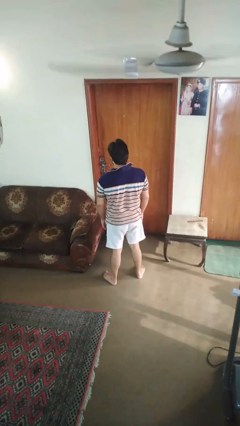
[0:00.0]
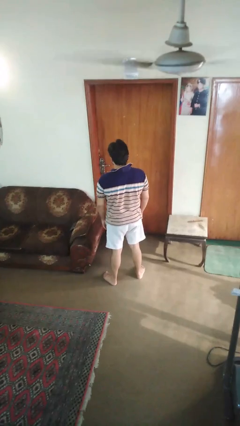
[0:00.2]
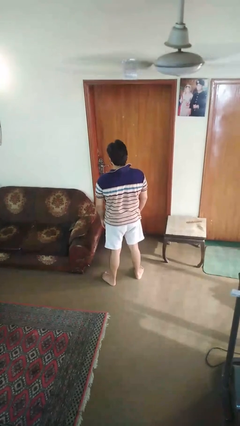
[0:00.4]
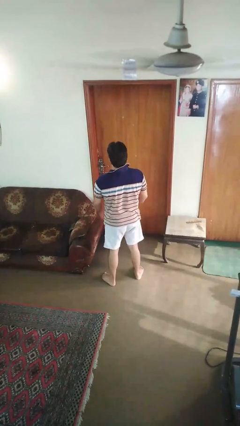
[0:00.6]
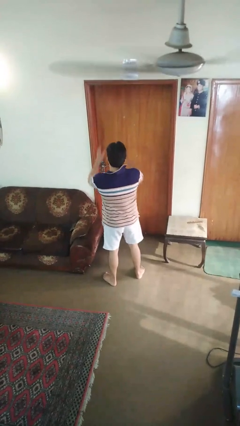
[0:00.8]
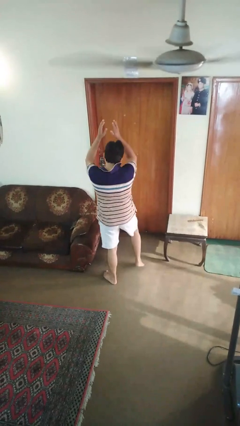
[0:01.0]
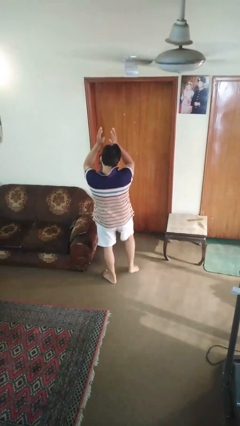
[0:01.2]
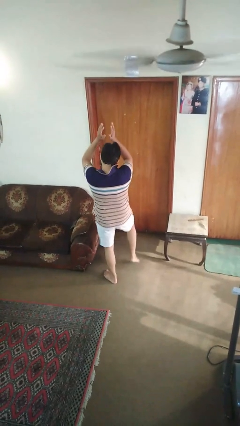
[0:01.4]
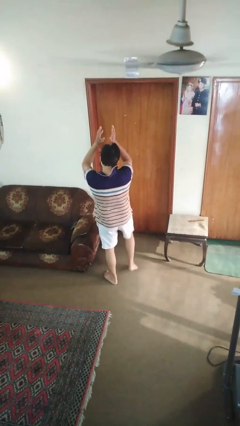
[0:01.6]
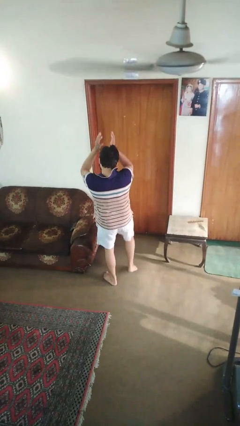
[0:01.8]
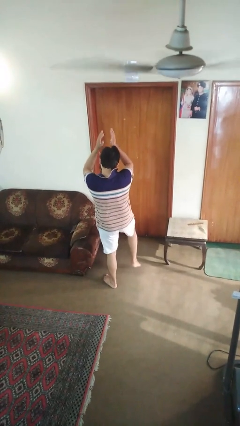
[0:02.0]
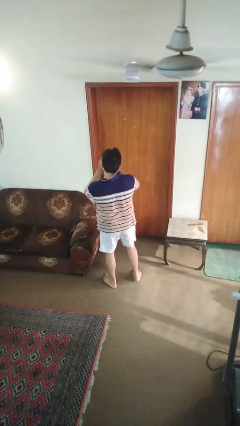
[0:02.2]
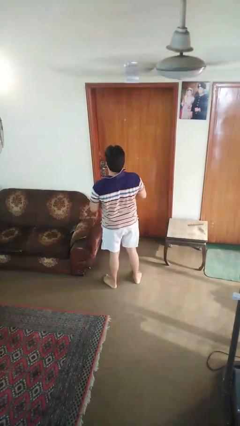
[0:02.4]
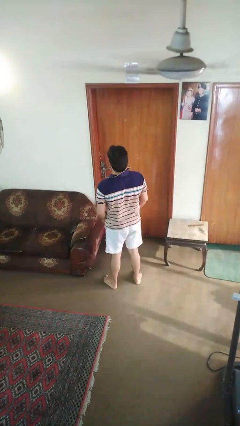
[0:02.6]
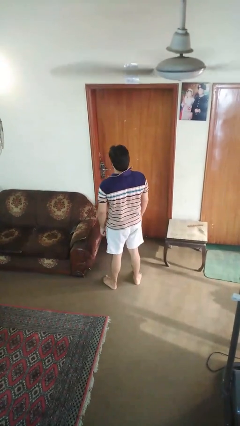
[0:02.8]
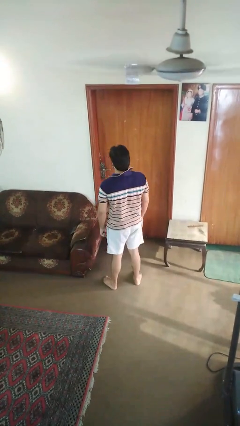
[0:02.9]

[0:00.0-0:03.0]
person dances in place

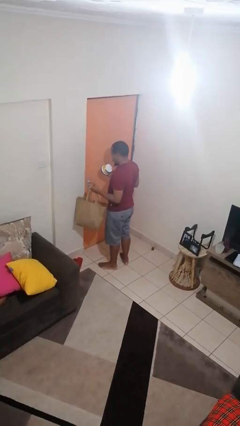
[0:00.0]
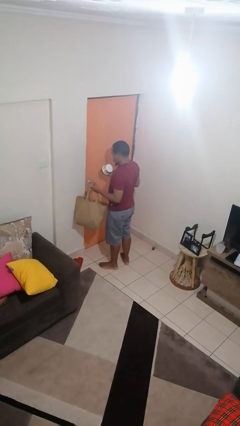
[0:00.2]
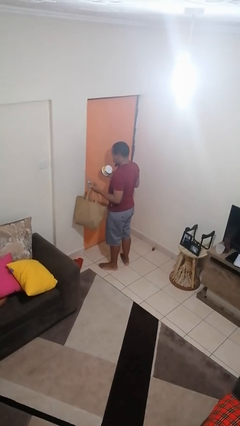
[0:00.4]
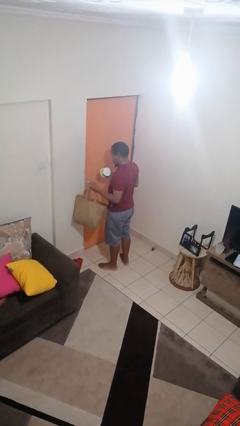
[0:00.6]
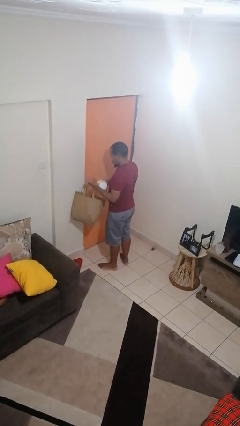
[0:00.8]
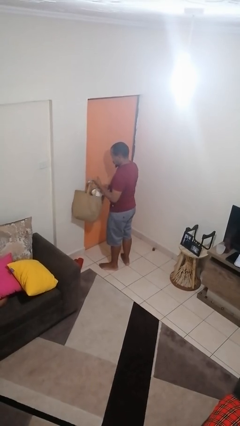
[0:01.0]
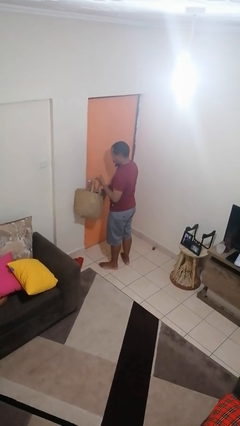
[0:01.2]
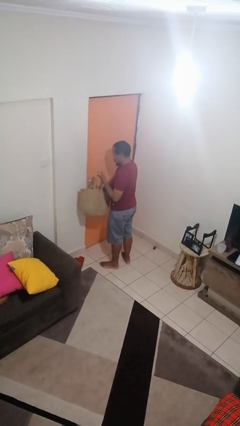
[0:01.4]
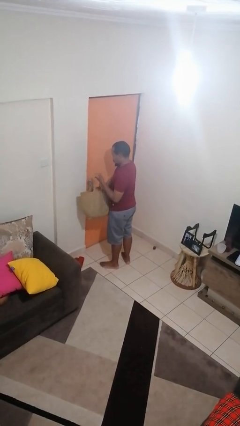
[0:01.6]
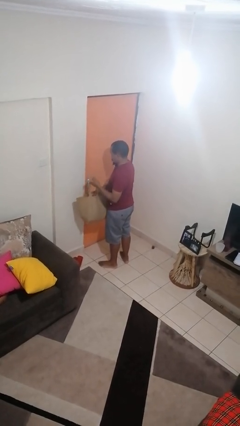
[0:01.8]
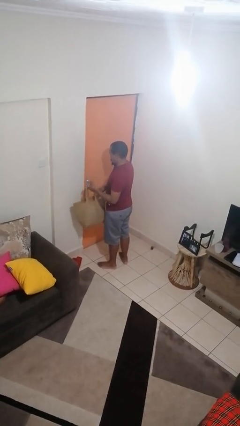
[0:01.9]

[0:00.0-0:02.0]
person puts object into bag

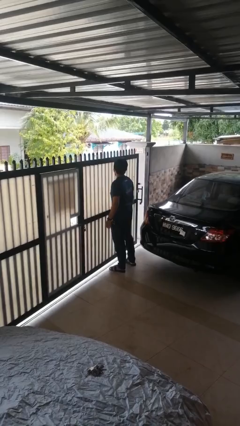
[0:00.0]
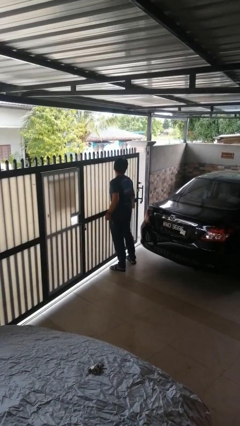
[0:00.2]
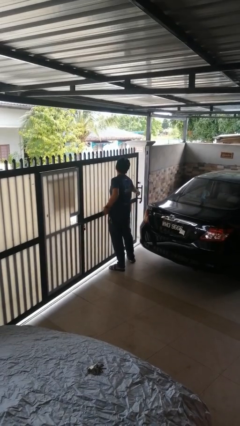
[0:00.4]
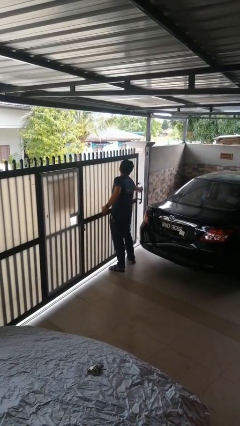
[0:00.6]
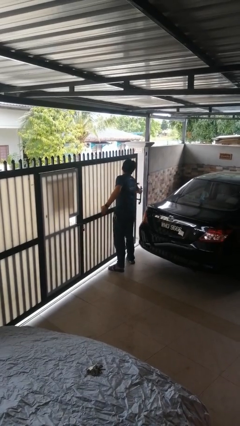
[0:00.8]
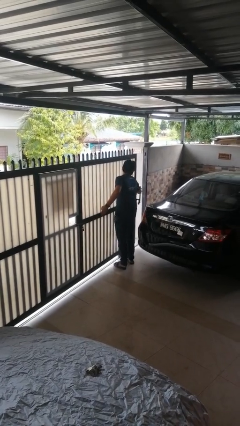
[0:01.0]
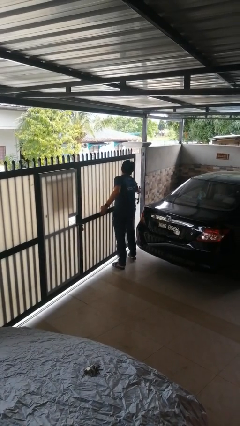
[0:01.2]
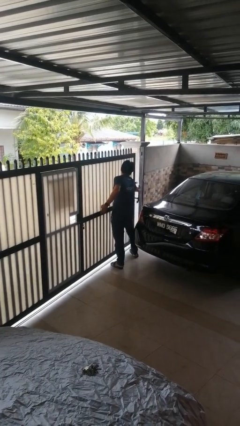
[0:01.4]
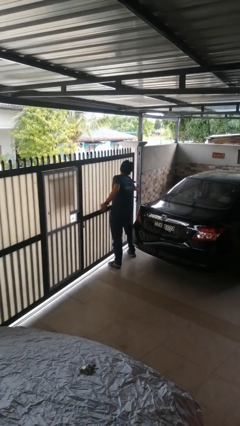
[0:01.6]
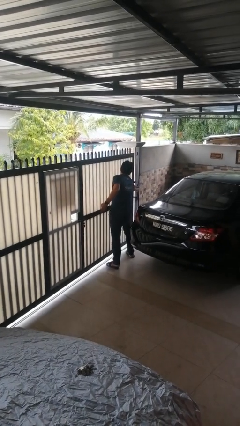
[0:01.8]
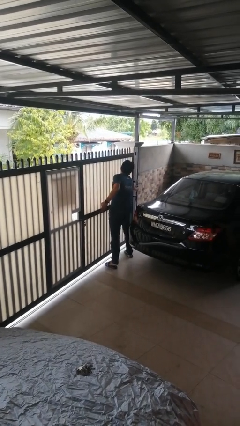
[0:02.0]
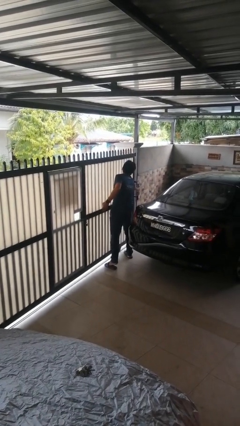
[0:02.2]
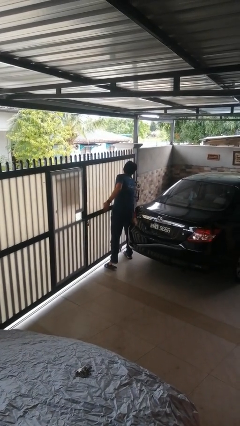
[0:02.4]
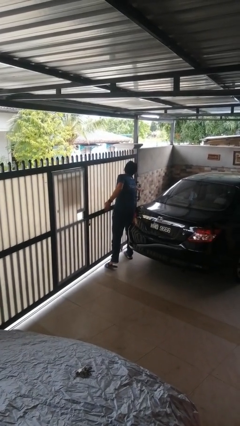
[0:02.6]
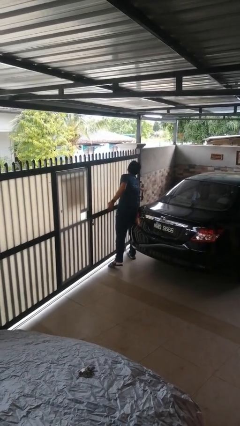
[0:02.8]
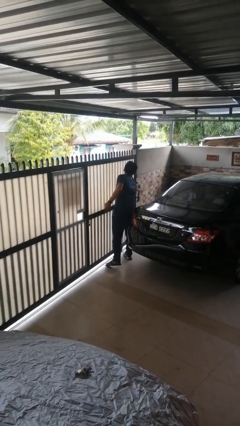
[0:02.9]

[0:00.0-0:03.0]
person closes sliding door

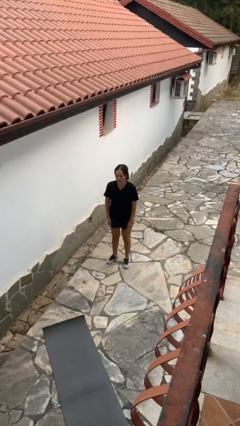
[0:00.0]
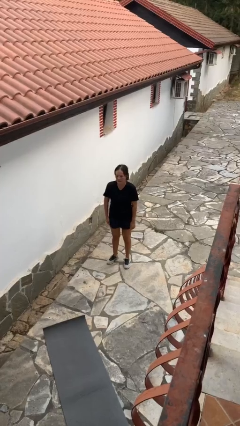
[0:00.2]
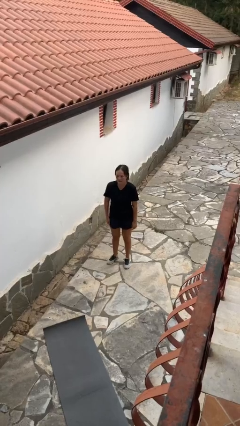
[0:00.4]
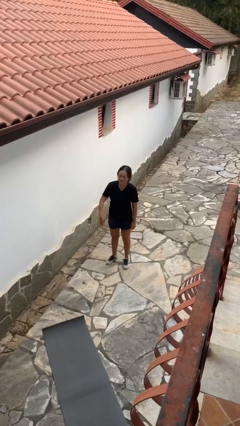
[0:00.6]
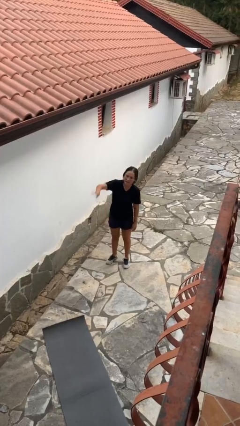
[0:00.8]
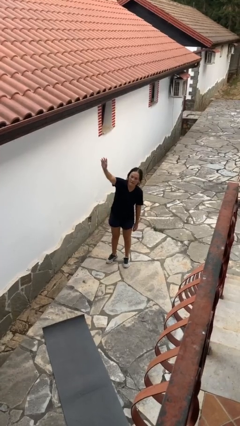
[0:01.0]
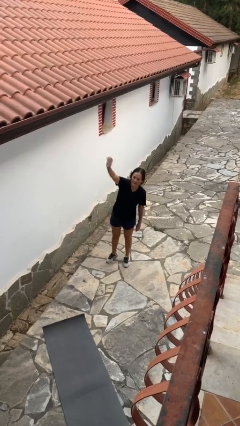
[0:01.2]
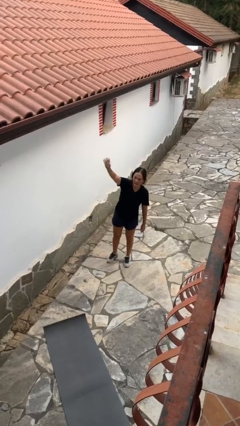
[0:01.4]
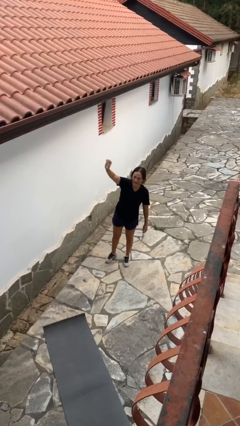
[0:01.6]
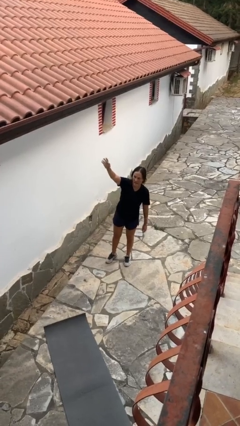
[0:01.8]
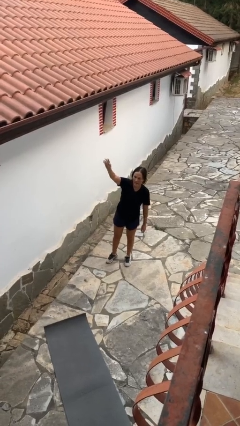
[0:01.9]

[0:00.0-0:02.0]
person gestures raise hand

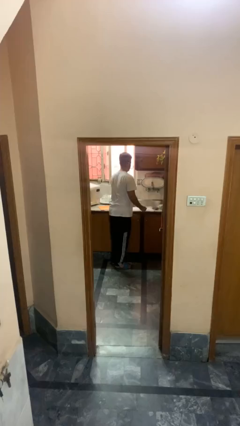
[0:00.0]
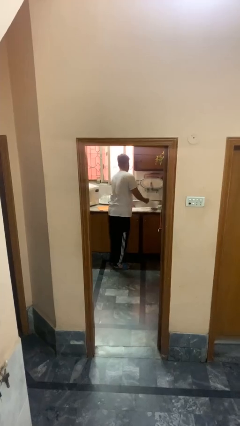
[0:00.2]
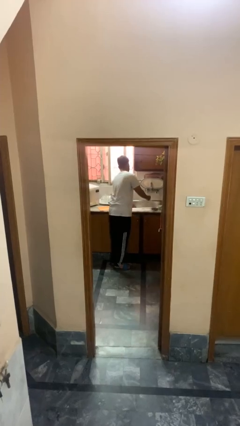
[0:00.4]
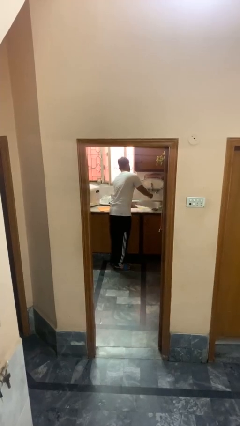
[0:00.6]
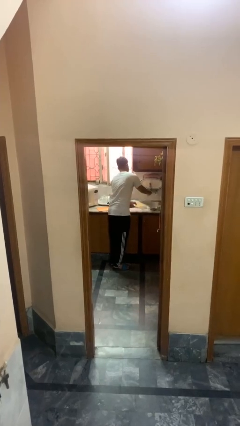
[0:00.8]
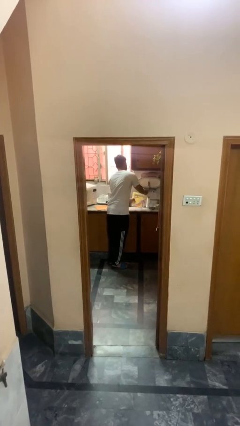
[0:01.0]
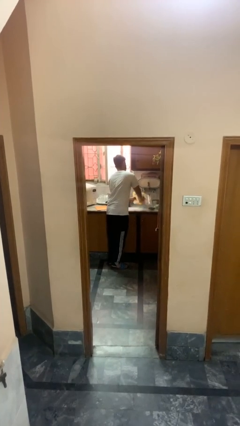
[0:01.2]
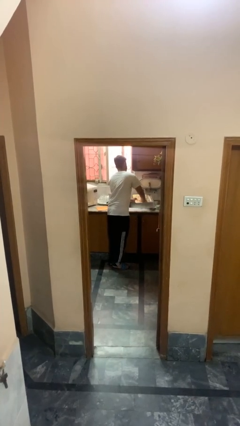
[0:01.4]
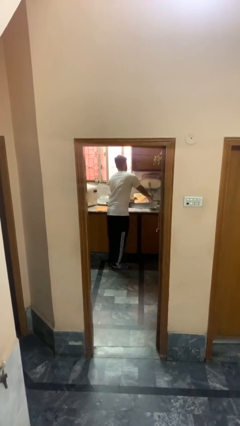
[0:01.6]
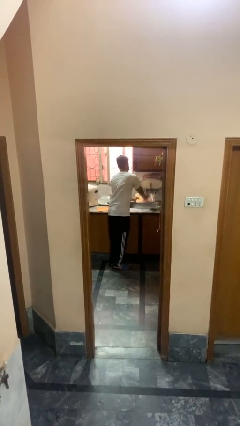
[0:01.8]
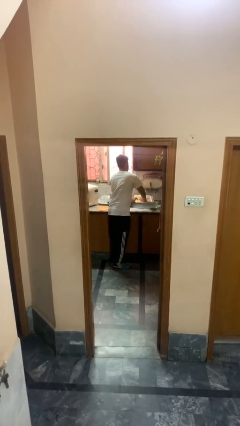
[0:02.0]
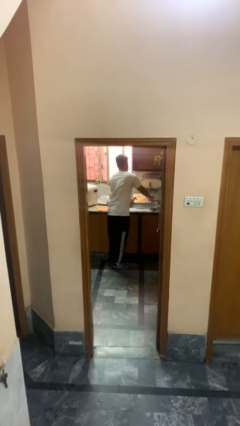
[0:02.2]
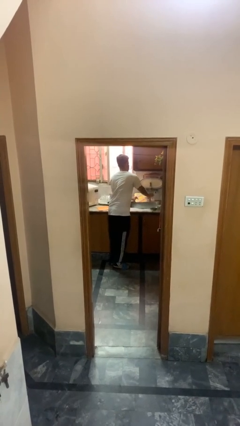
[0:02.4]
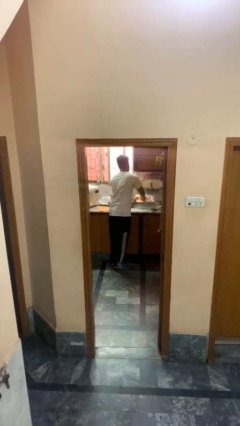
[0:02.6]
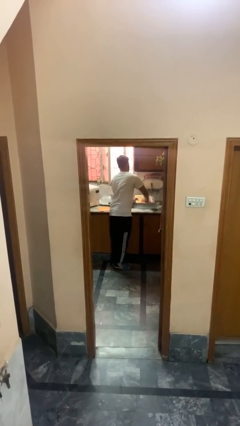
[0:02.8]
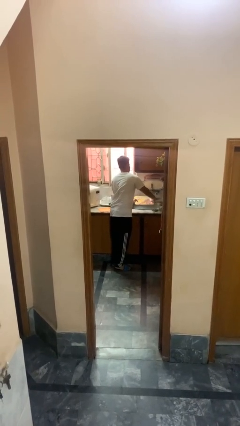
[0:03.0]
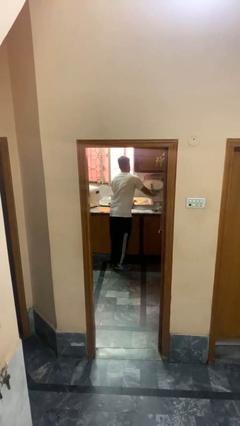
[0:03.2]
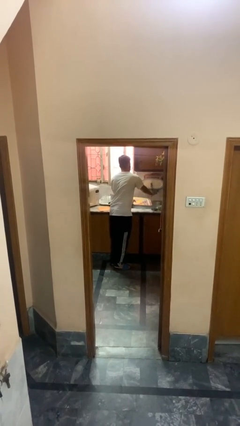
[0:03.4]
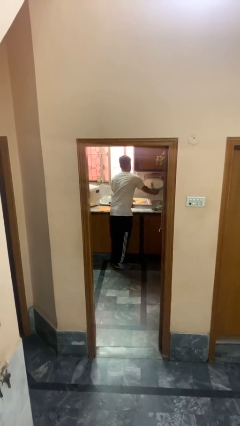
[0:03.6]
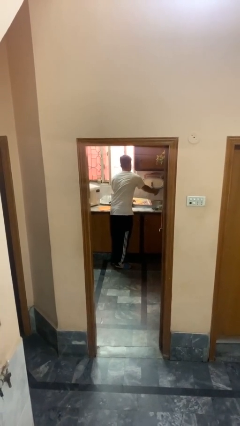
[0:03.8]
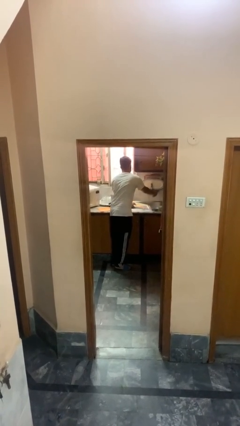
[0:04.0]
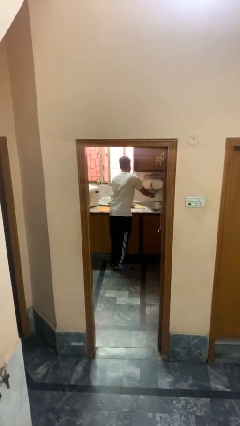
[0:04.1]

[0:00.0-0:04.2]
person washes dish

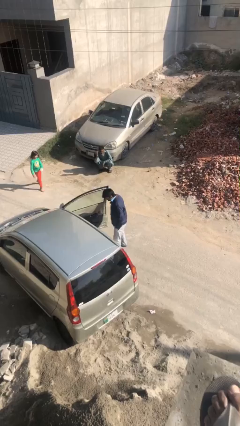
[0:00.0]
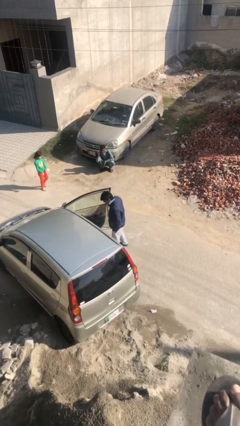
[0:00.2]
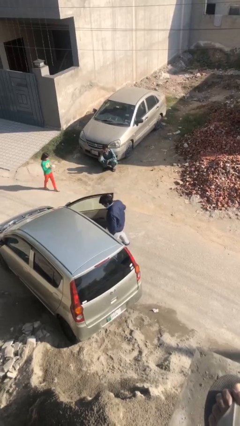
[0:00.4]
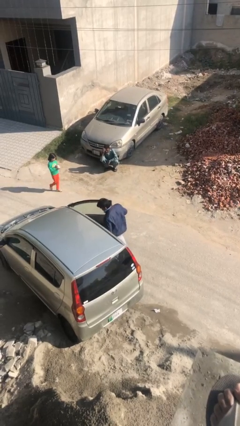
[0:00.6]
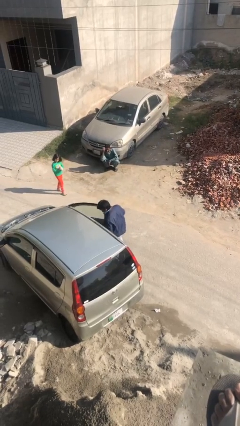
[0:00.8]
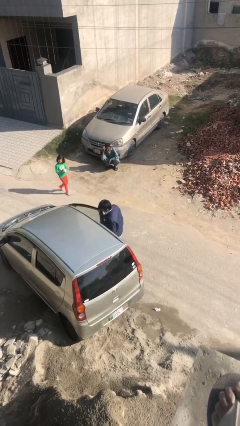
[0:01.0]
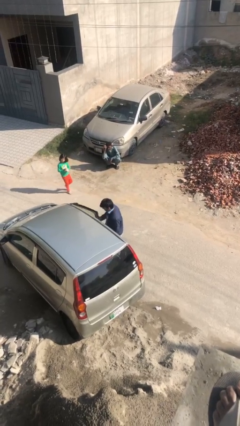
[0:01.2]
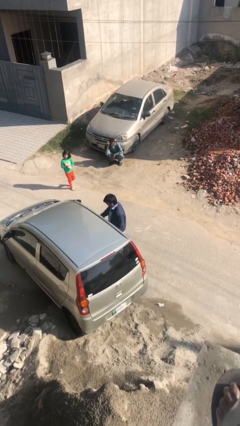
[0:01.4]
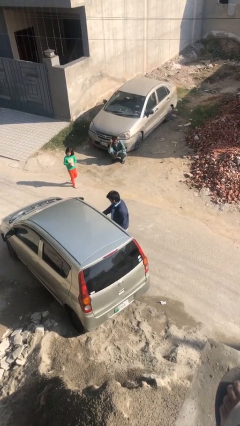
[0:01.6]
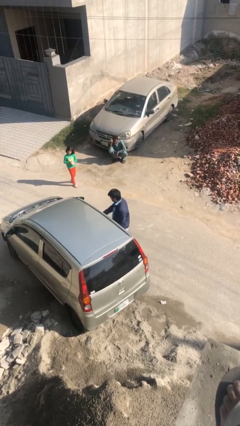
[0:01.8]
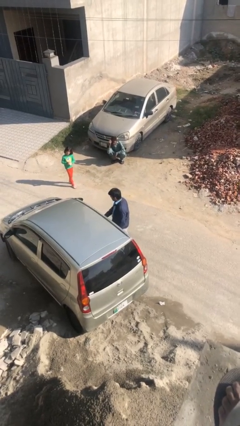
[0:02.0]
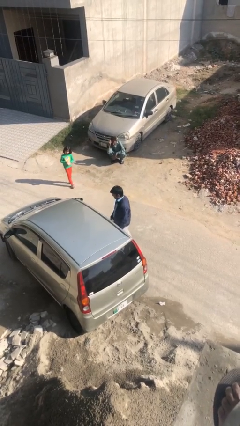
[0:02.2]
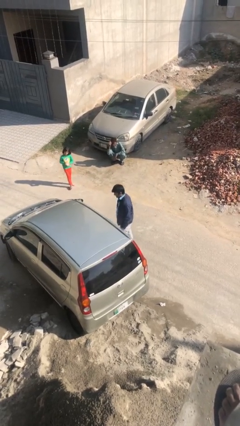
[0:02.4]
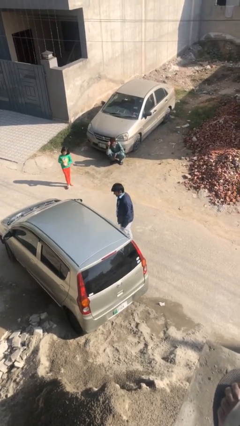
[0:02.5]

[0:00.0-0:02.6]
person closes car door

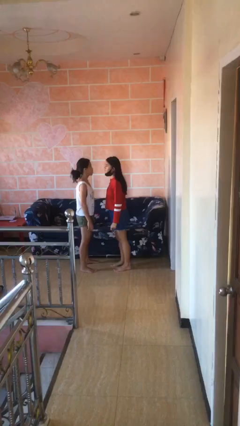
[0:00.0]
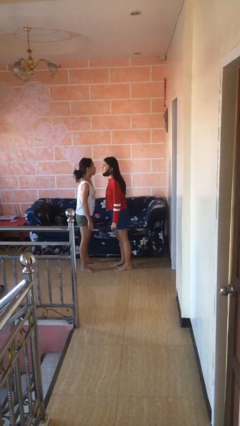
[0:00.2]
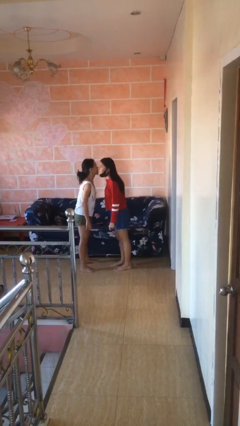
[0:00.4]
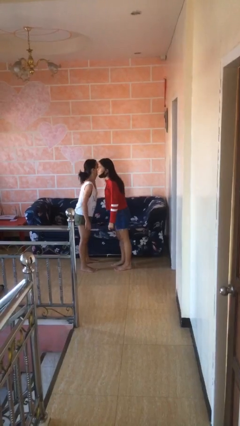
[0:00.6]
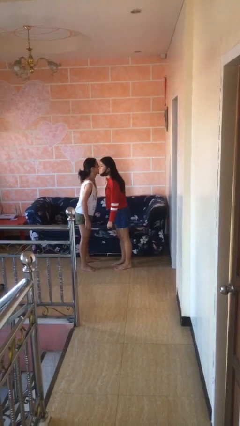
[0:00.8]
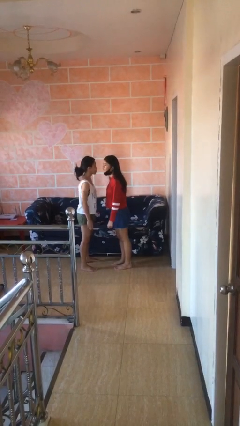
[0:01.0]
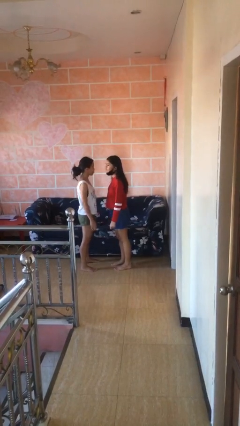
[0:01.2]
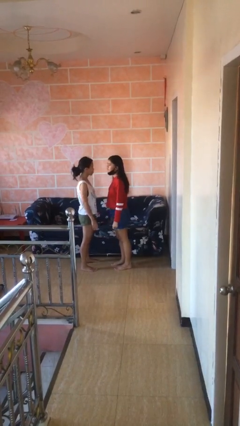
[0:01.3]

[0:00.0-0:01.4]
person kisses cheek of person
